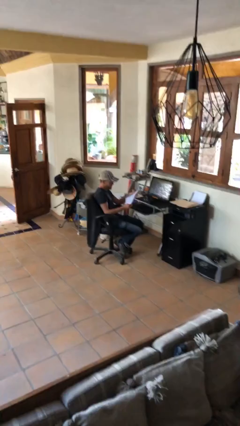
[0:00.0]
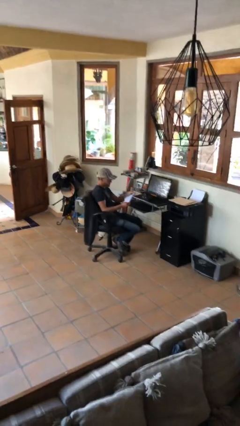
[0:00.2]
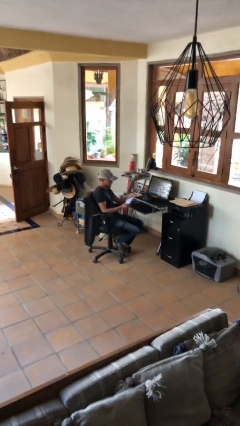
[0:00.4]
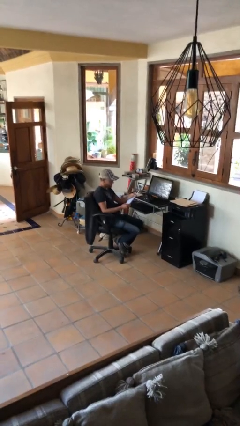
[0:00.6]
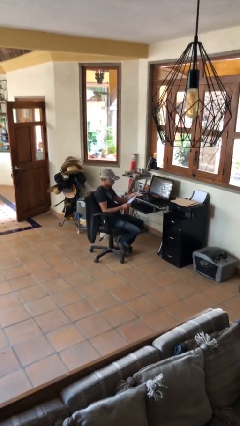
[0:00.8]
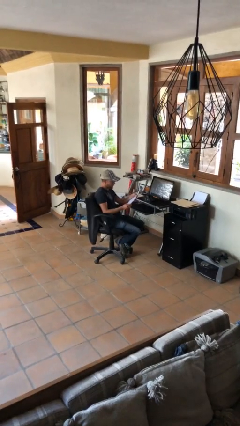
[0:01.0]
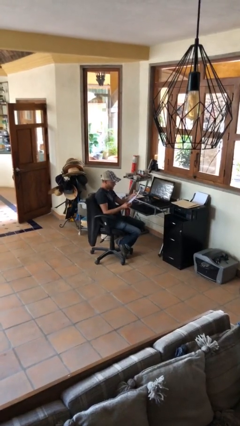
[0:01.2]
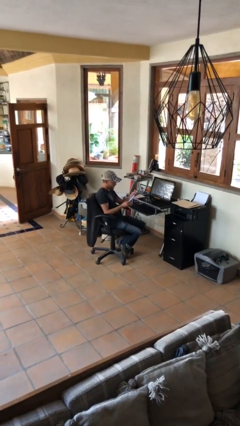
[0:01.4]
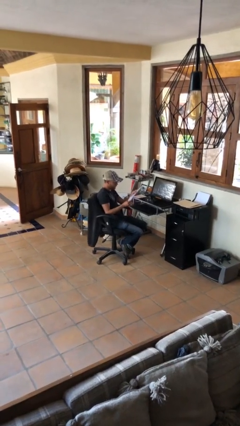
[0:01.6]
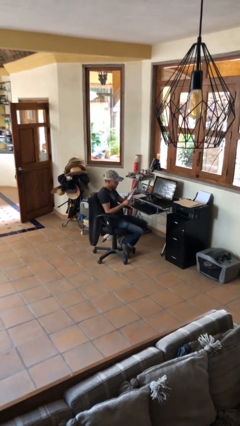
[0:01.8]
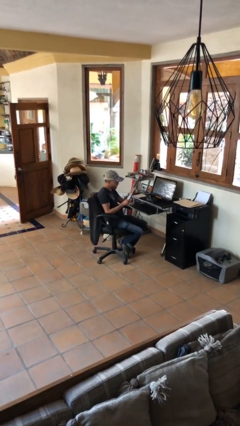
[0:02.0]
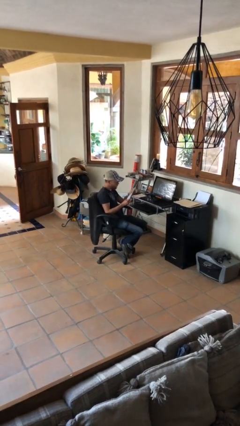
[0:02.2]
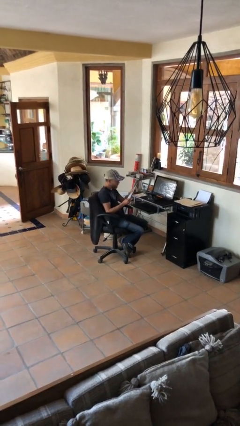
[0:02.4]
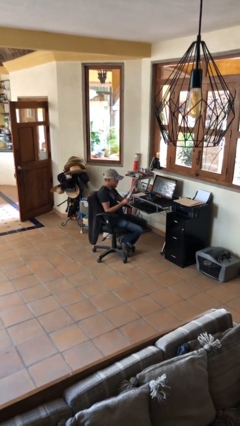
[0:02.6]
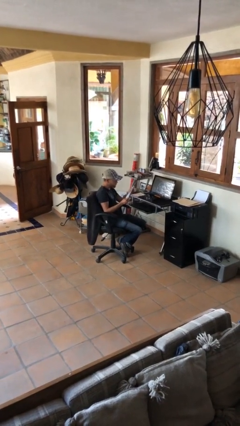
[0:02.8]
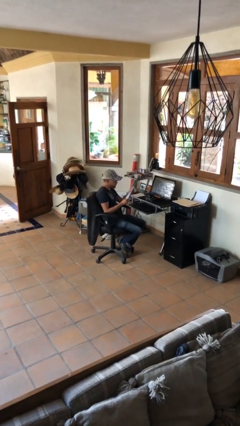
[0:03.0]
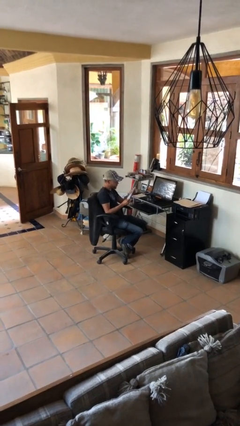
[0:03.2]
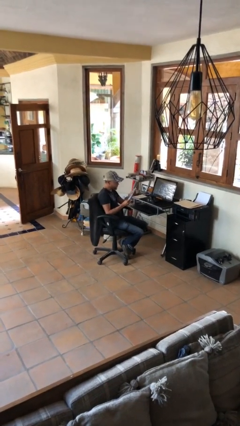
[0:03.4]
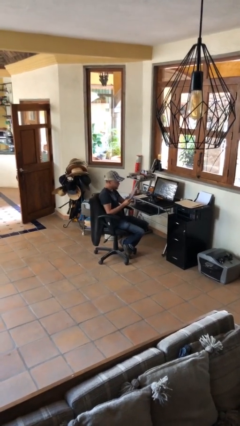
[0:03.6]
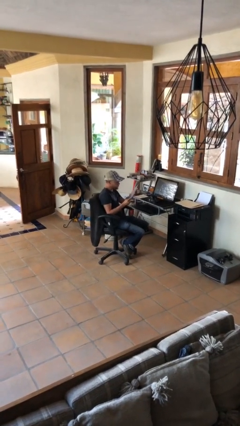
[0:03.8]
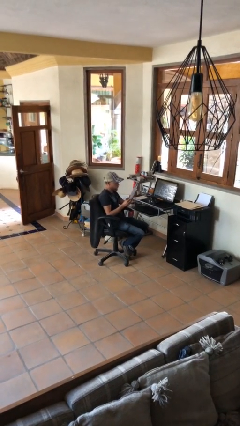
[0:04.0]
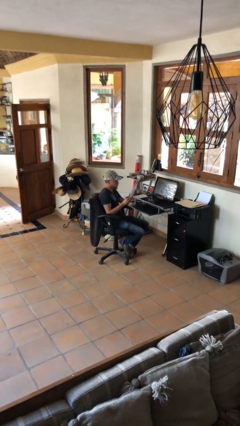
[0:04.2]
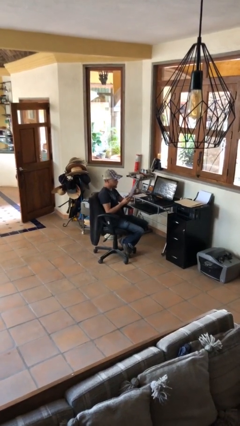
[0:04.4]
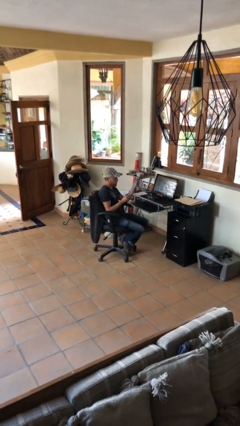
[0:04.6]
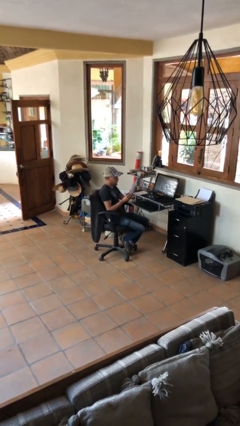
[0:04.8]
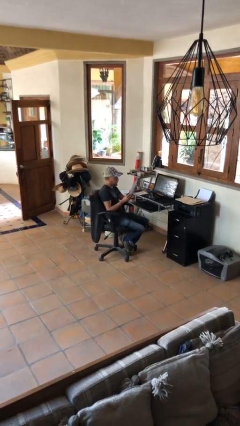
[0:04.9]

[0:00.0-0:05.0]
person reads document

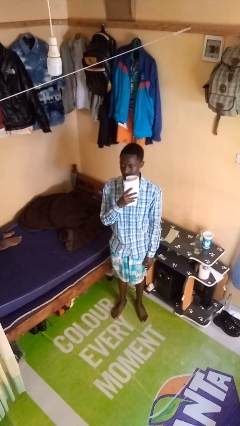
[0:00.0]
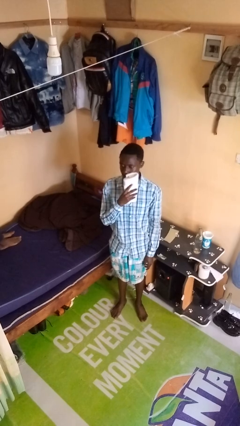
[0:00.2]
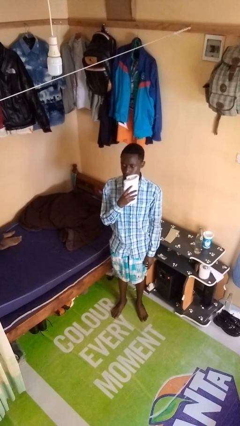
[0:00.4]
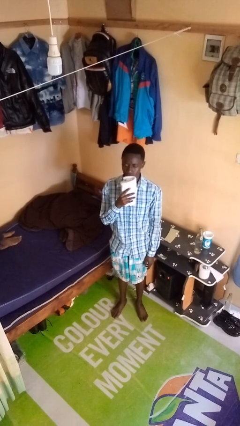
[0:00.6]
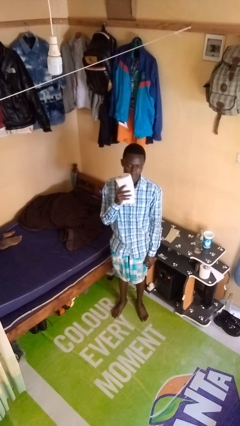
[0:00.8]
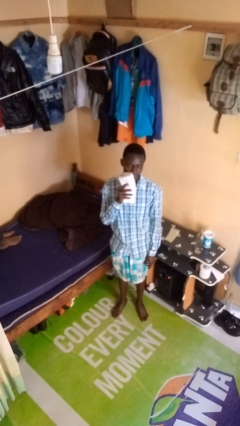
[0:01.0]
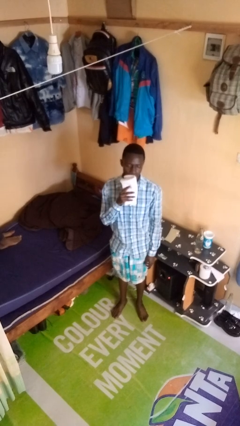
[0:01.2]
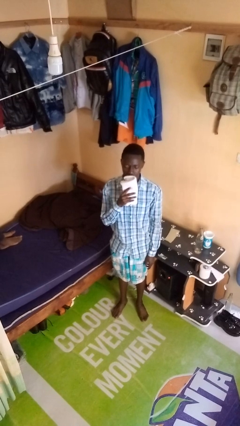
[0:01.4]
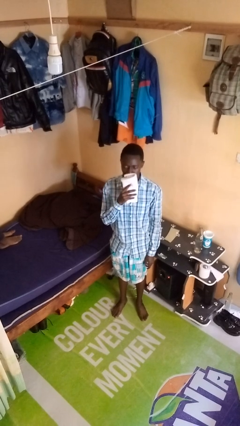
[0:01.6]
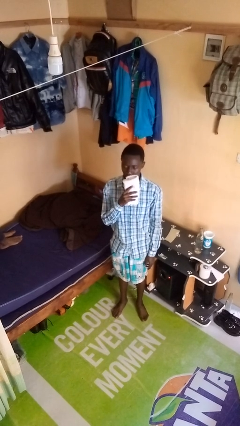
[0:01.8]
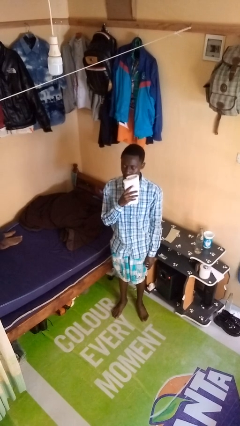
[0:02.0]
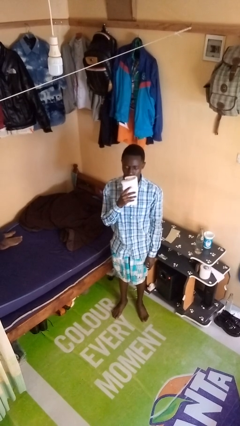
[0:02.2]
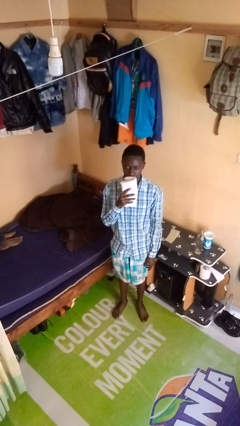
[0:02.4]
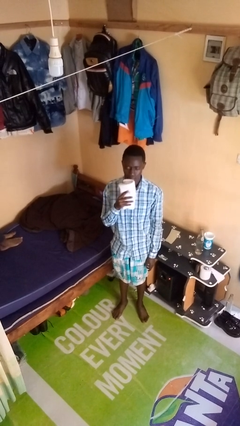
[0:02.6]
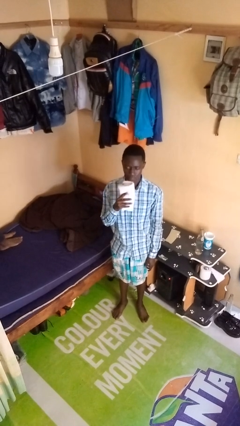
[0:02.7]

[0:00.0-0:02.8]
person wipes mouth with napkin

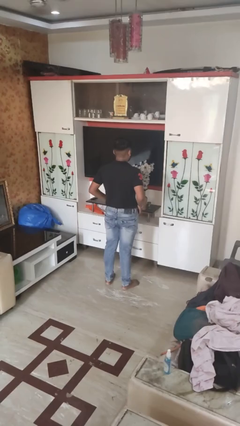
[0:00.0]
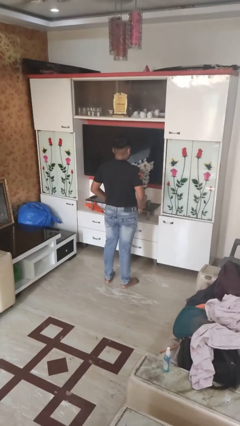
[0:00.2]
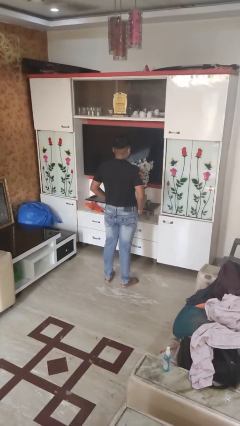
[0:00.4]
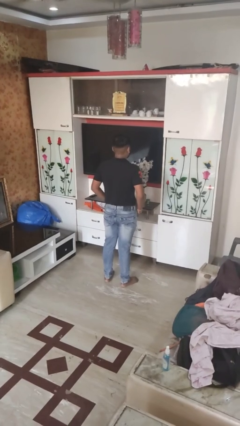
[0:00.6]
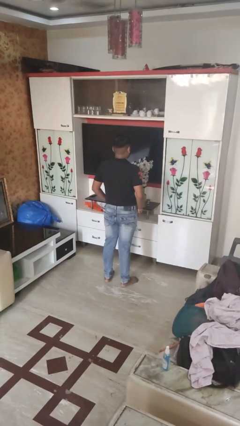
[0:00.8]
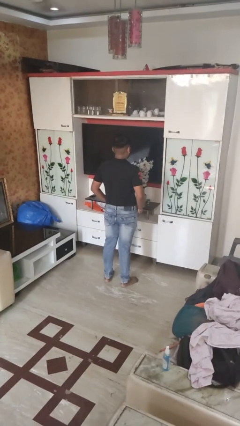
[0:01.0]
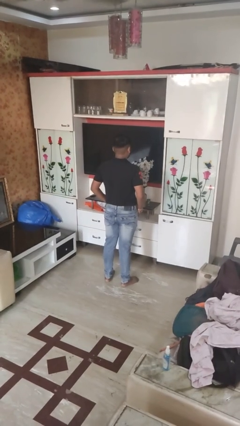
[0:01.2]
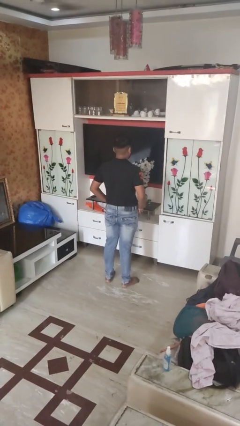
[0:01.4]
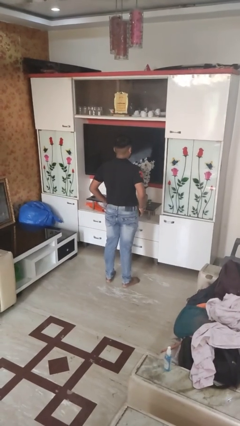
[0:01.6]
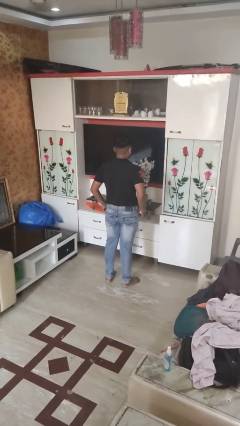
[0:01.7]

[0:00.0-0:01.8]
person puts hands in back pockets

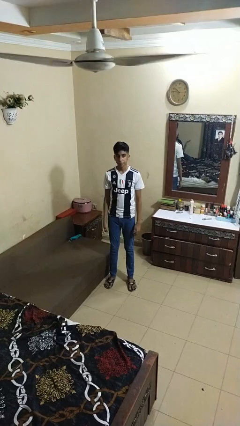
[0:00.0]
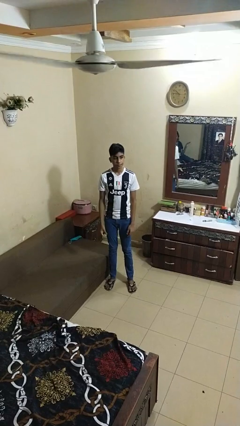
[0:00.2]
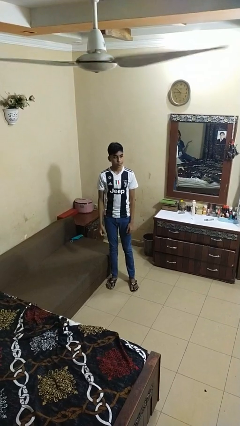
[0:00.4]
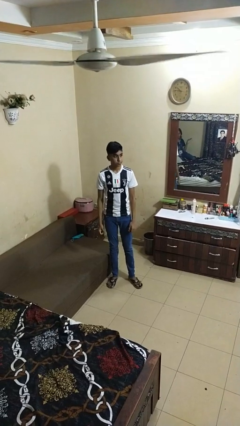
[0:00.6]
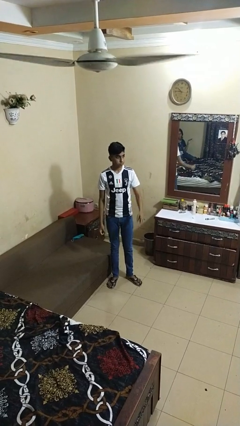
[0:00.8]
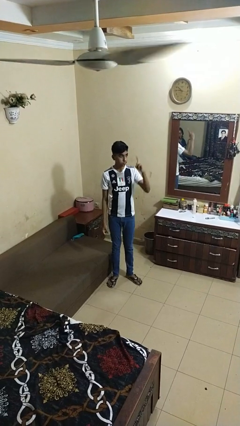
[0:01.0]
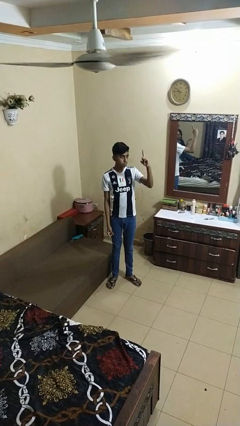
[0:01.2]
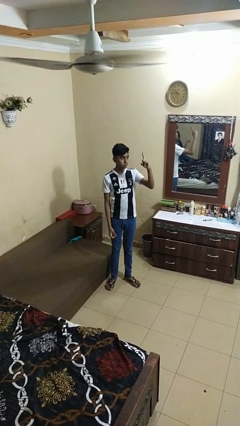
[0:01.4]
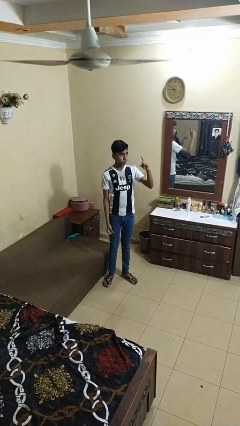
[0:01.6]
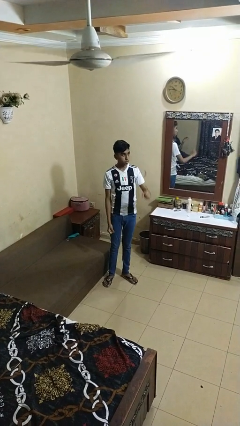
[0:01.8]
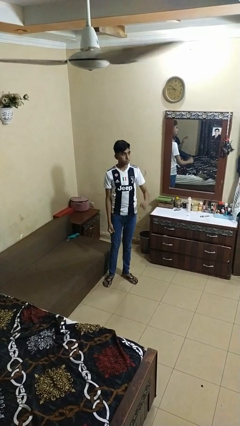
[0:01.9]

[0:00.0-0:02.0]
person gestures number one

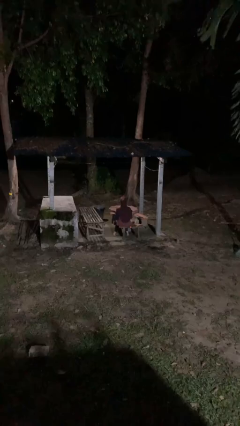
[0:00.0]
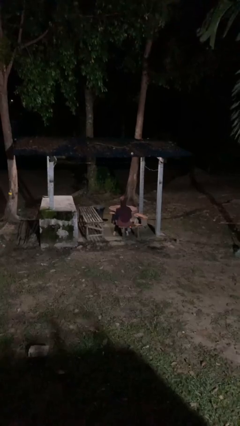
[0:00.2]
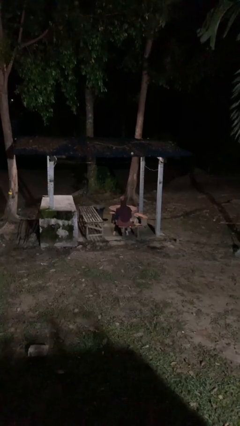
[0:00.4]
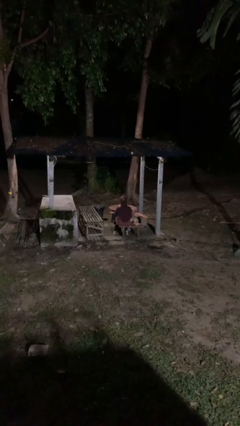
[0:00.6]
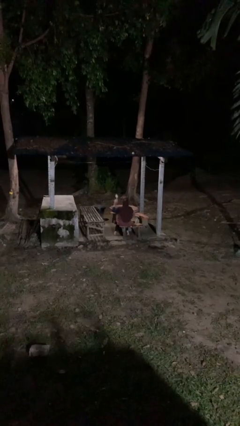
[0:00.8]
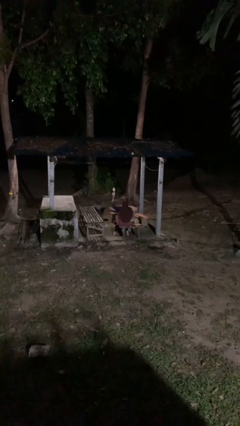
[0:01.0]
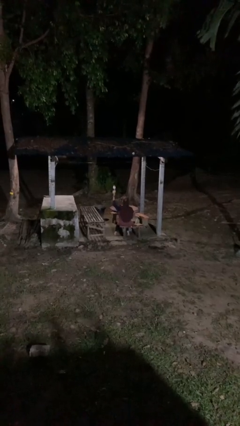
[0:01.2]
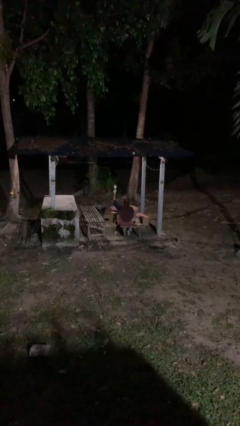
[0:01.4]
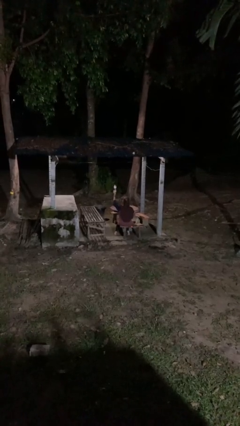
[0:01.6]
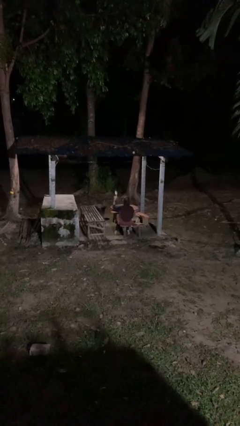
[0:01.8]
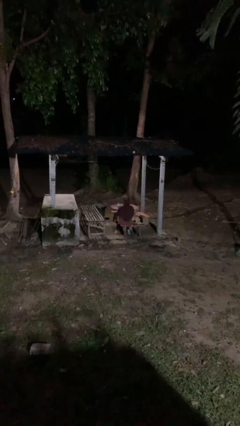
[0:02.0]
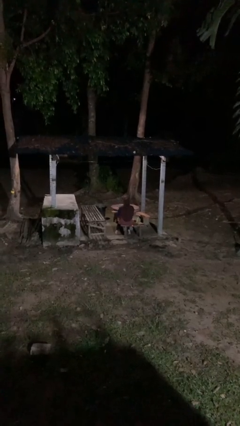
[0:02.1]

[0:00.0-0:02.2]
person holds object above head

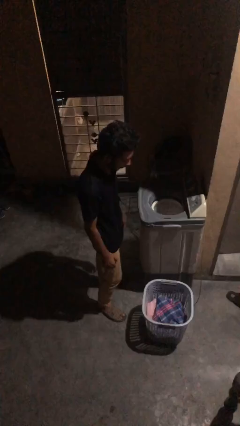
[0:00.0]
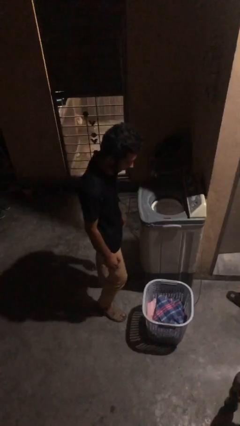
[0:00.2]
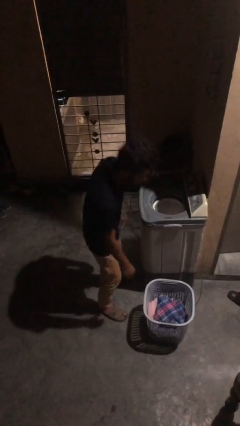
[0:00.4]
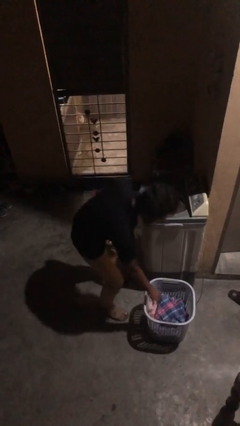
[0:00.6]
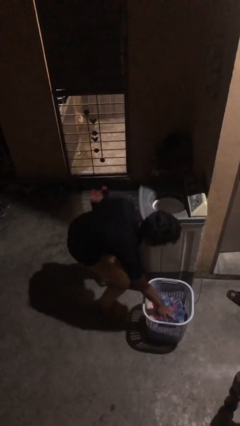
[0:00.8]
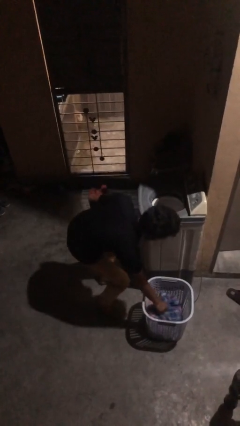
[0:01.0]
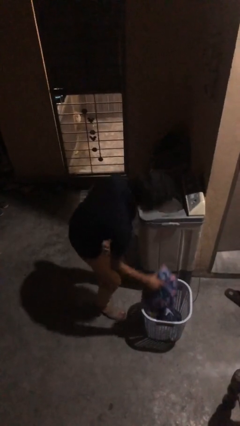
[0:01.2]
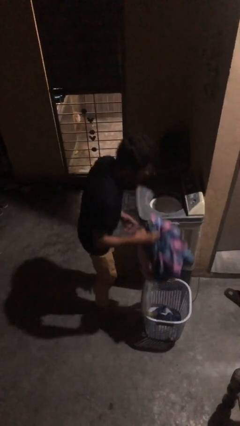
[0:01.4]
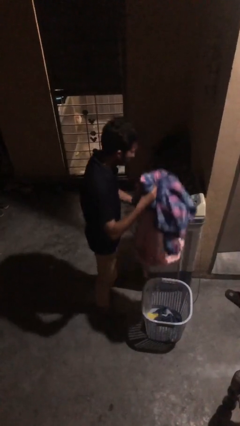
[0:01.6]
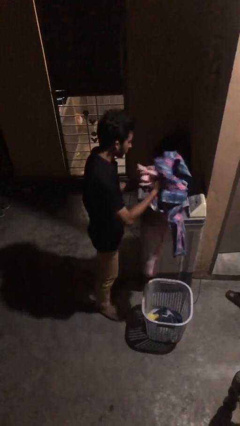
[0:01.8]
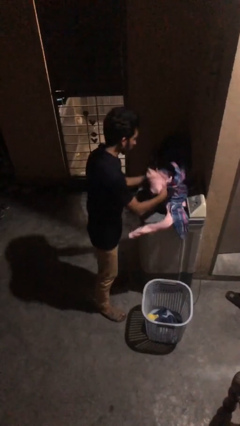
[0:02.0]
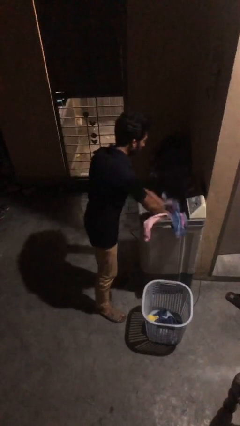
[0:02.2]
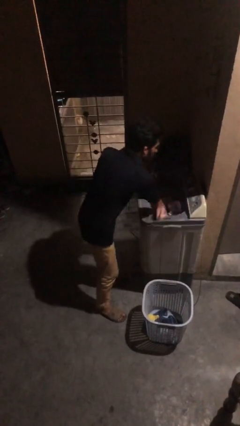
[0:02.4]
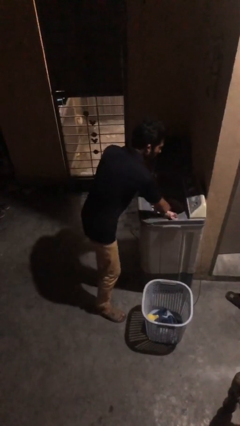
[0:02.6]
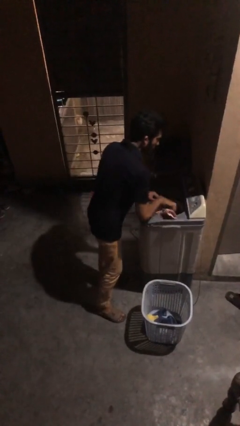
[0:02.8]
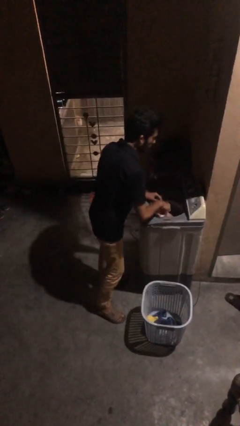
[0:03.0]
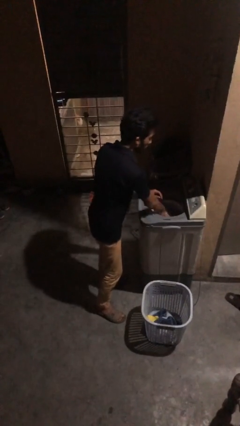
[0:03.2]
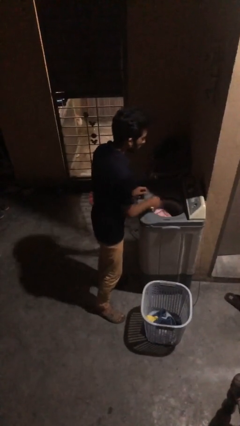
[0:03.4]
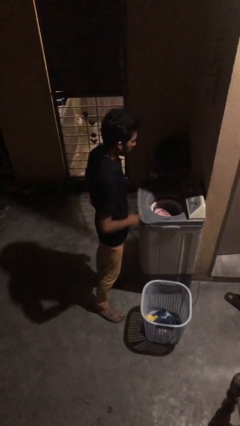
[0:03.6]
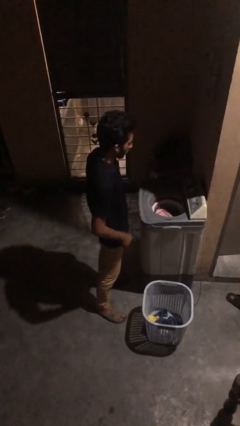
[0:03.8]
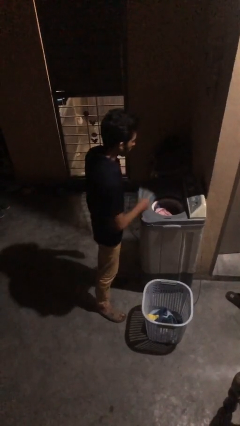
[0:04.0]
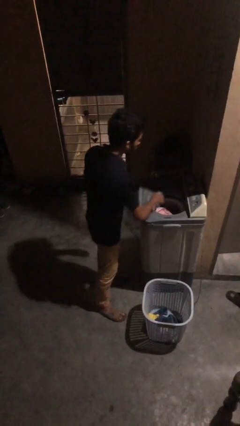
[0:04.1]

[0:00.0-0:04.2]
person loads dryer
